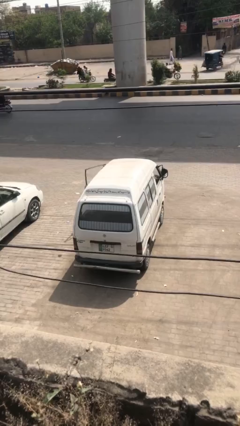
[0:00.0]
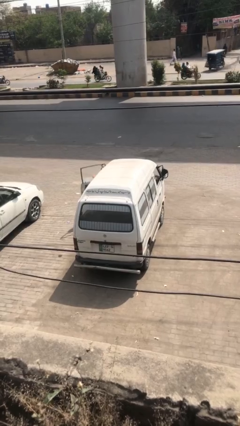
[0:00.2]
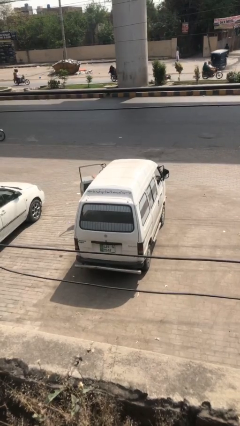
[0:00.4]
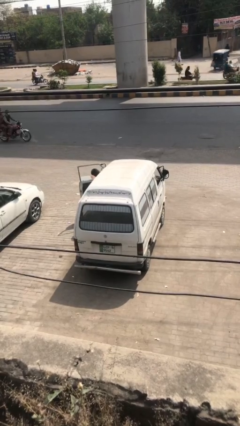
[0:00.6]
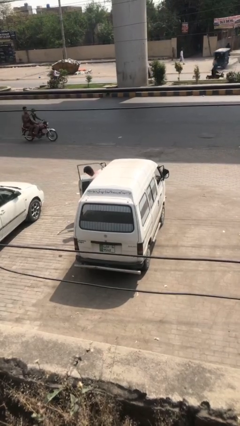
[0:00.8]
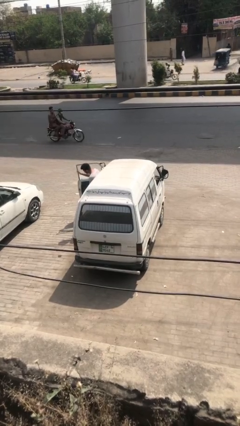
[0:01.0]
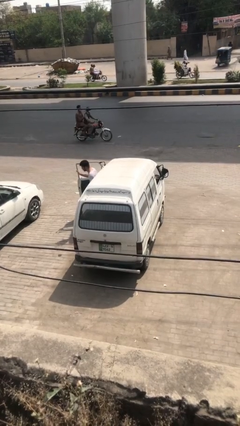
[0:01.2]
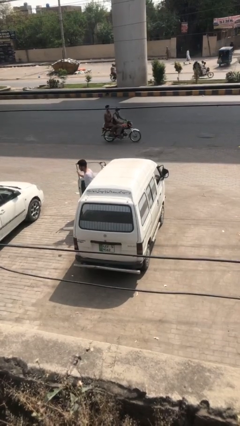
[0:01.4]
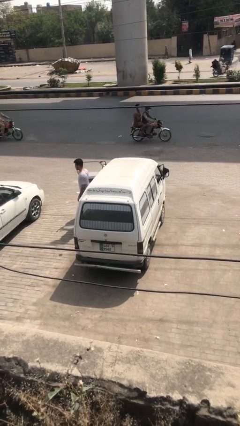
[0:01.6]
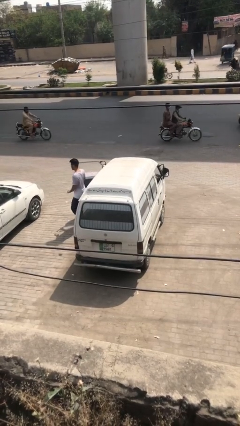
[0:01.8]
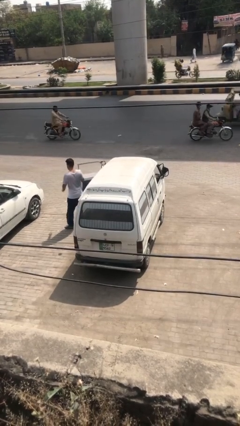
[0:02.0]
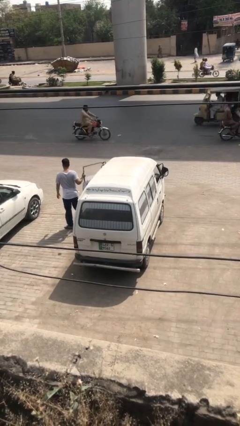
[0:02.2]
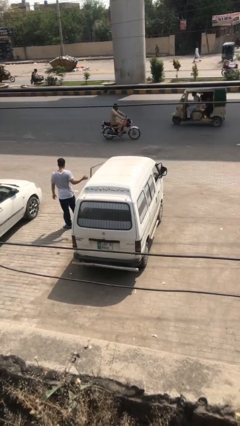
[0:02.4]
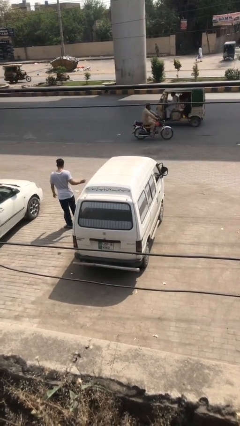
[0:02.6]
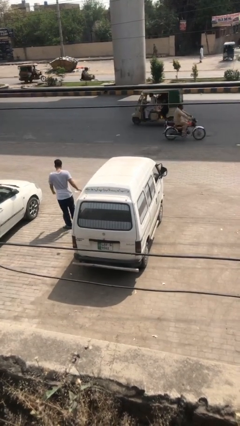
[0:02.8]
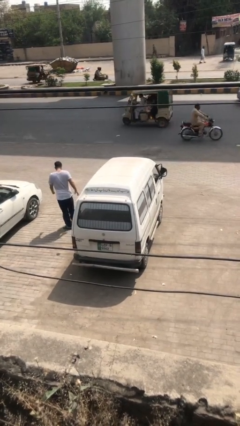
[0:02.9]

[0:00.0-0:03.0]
car drops off person

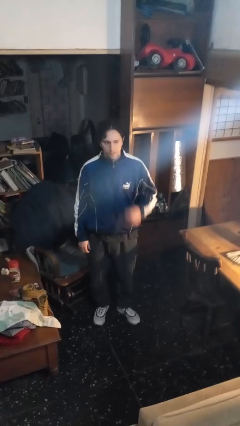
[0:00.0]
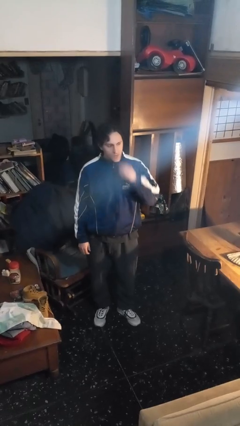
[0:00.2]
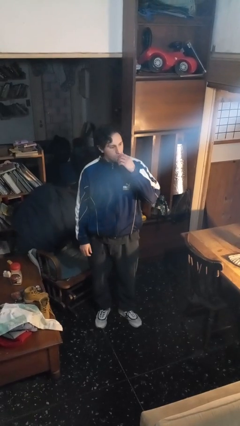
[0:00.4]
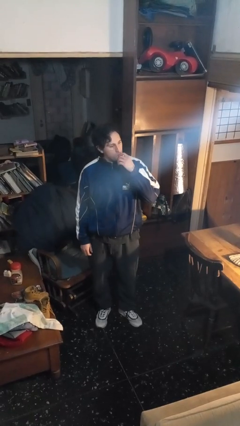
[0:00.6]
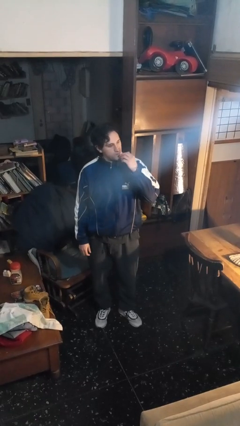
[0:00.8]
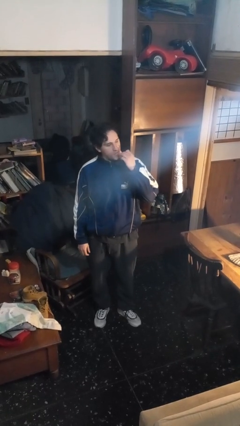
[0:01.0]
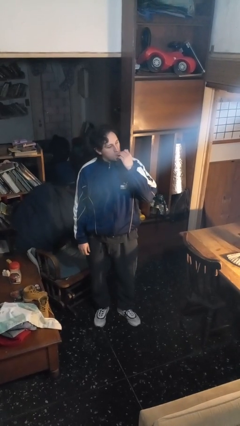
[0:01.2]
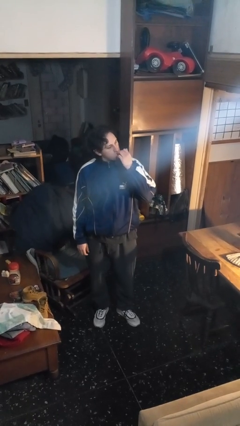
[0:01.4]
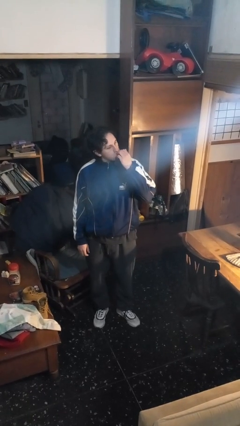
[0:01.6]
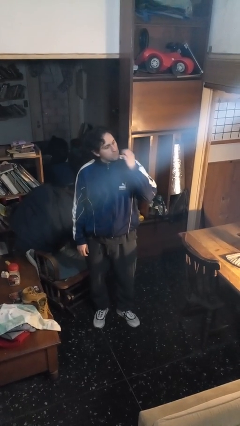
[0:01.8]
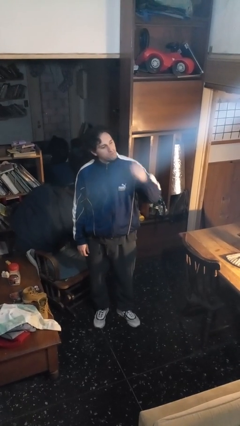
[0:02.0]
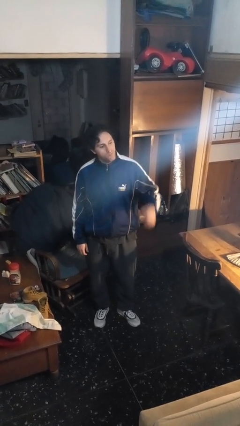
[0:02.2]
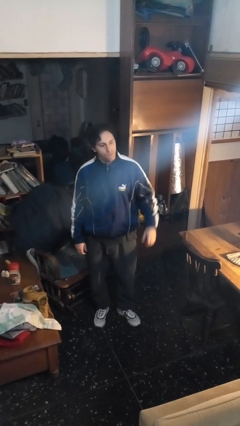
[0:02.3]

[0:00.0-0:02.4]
person licks fingers

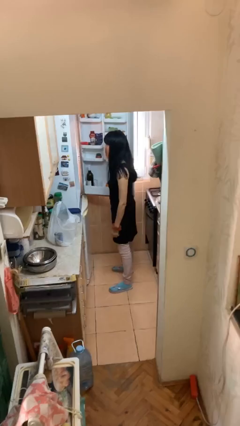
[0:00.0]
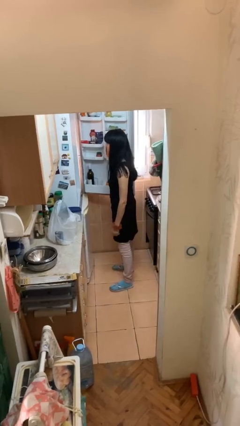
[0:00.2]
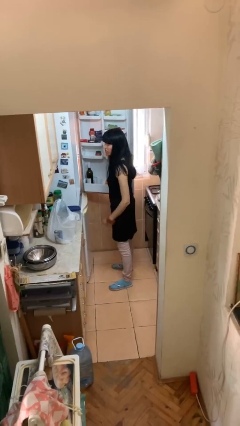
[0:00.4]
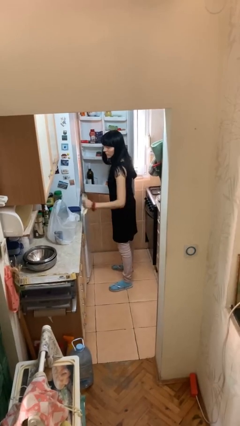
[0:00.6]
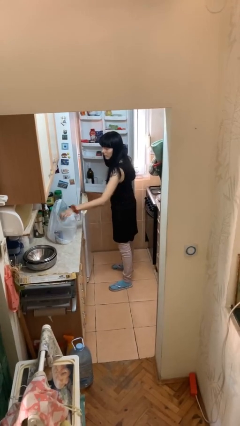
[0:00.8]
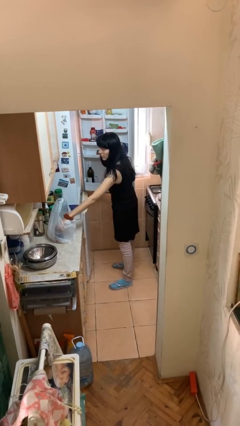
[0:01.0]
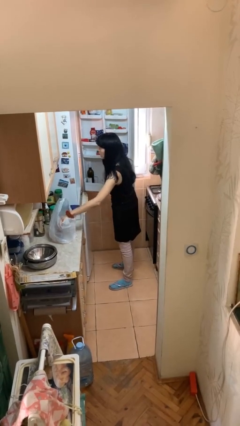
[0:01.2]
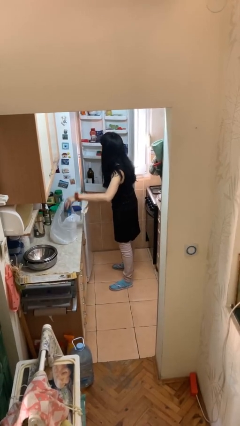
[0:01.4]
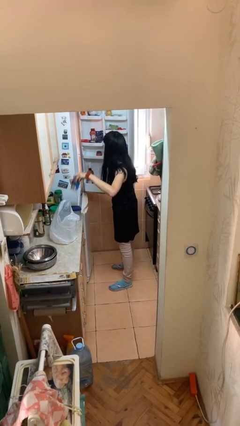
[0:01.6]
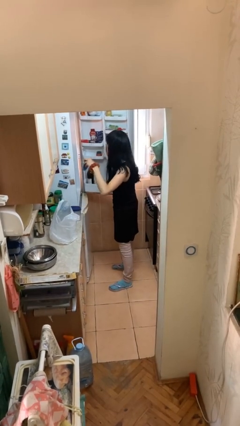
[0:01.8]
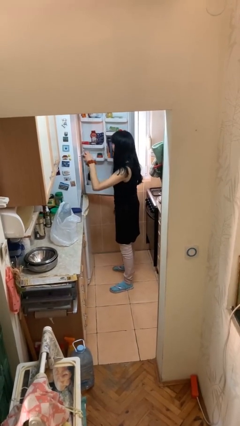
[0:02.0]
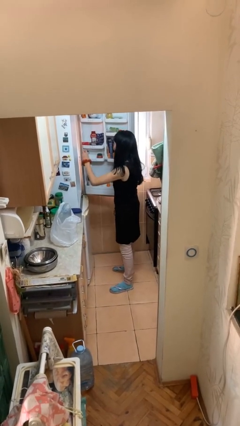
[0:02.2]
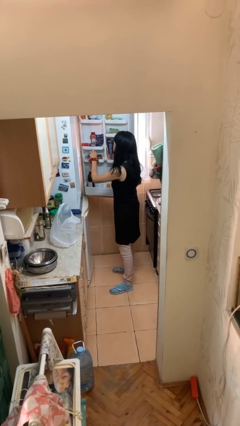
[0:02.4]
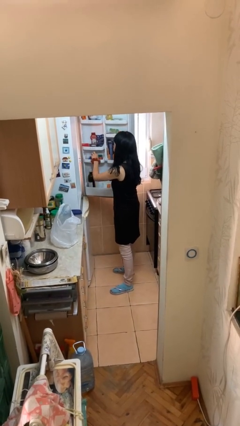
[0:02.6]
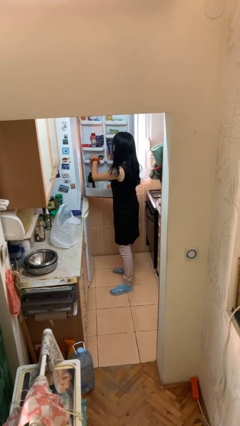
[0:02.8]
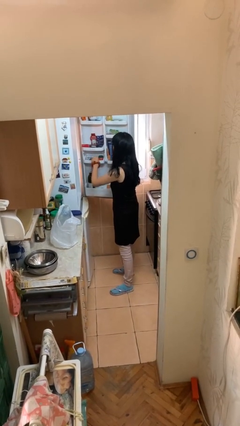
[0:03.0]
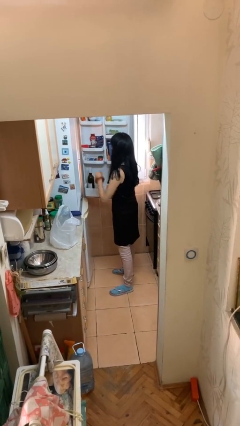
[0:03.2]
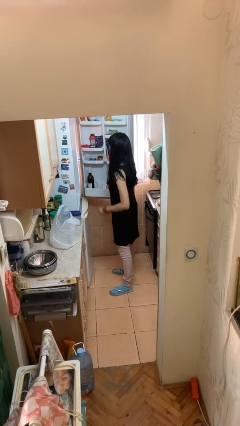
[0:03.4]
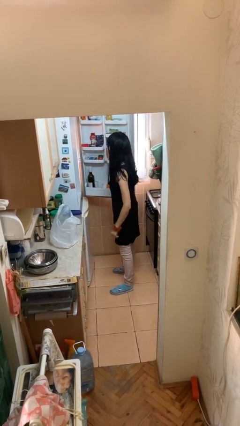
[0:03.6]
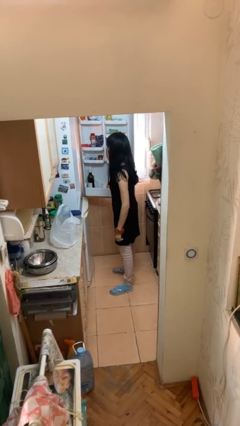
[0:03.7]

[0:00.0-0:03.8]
person loads groceries into refrigerator

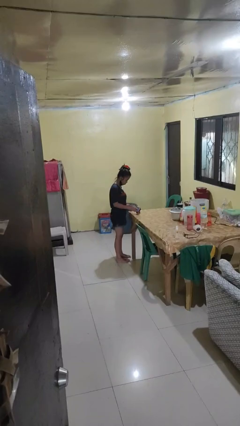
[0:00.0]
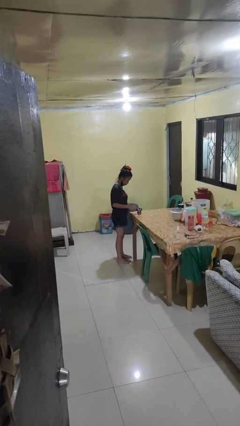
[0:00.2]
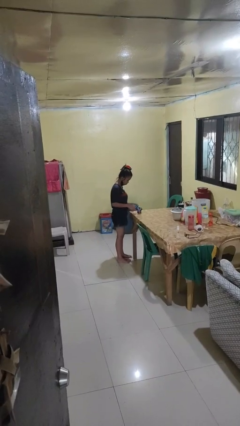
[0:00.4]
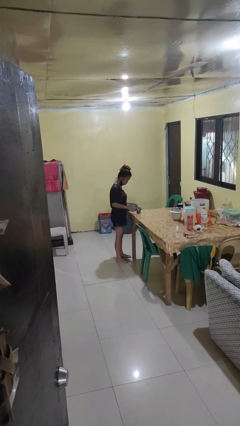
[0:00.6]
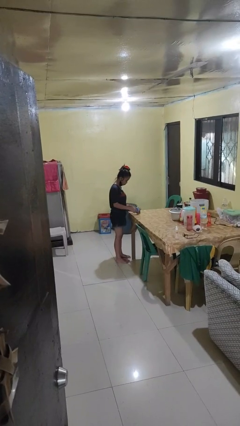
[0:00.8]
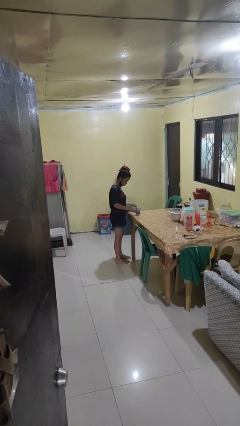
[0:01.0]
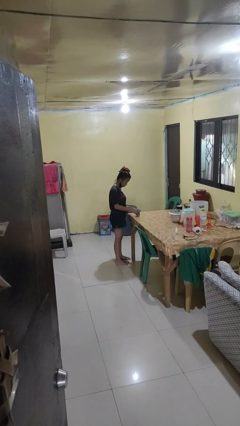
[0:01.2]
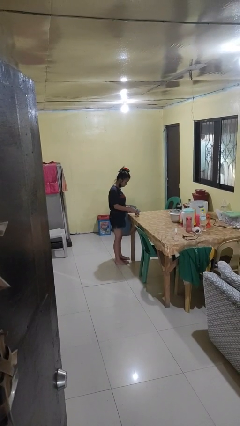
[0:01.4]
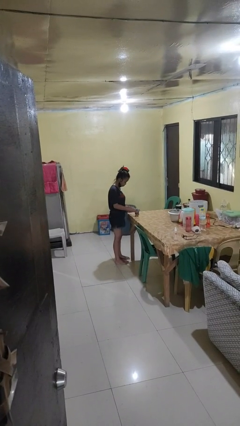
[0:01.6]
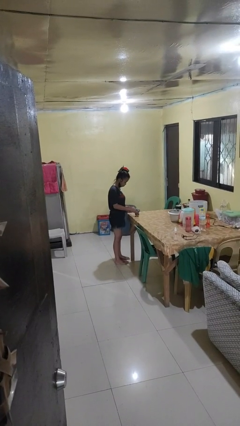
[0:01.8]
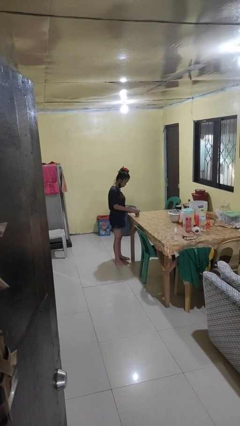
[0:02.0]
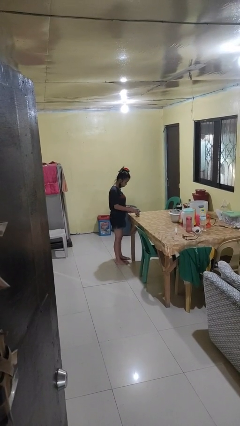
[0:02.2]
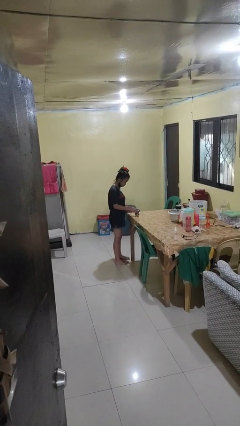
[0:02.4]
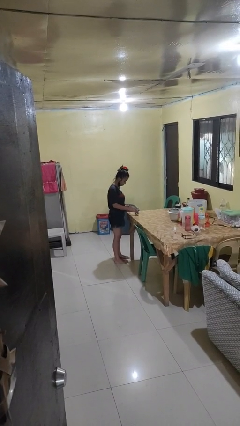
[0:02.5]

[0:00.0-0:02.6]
person opens can with can opener

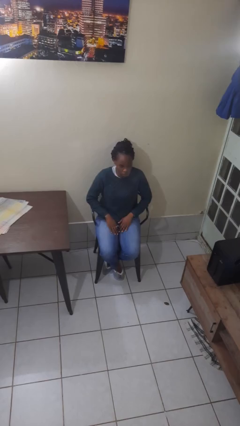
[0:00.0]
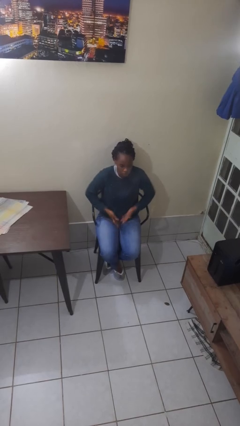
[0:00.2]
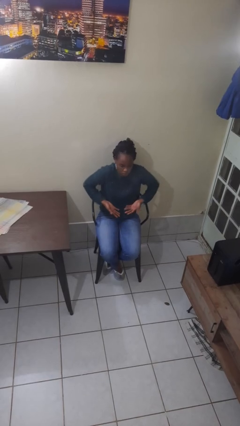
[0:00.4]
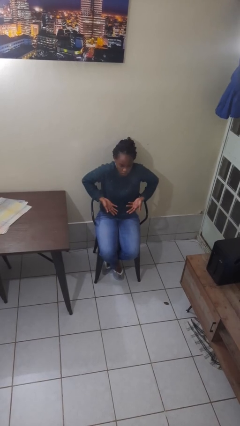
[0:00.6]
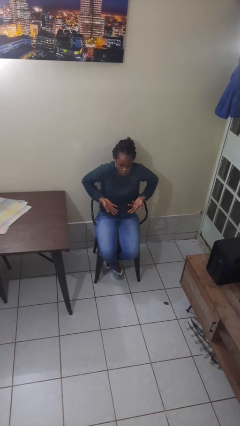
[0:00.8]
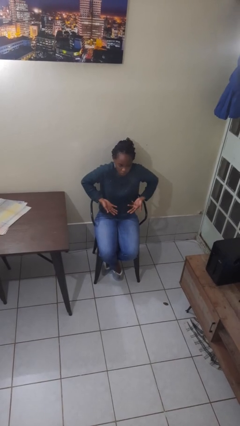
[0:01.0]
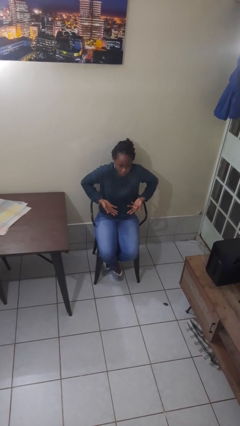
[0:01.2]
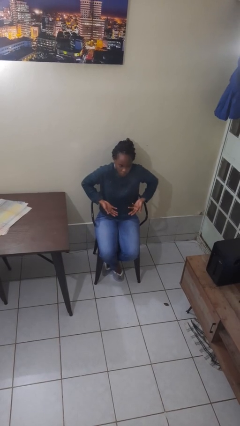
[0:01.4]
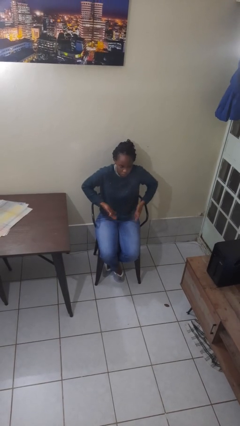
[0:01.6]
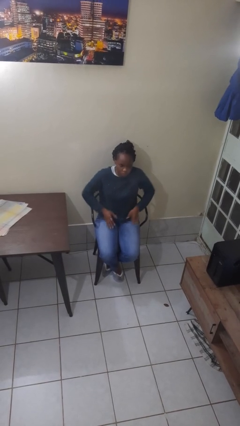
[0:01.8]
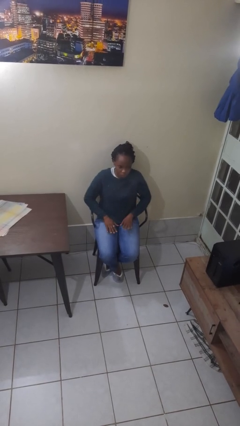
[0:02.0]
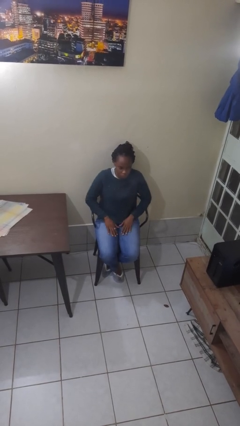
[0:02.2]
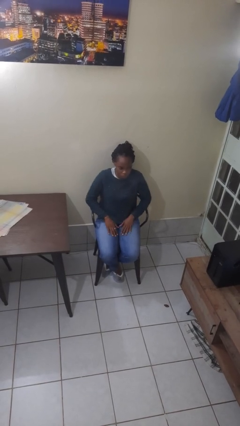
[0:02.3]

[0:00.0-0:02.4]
person shrugs

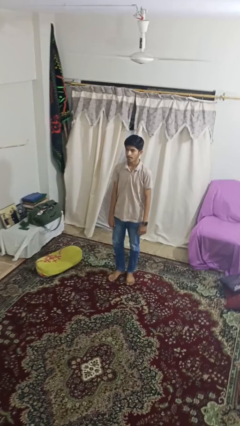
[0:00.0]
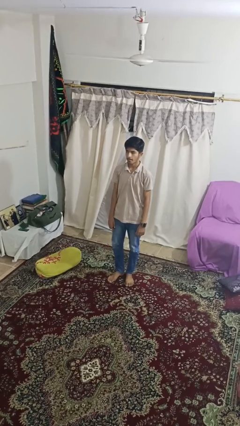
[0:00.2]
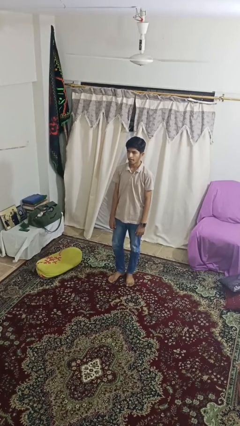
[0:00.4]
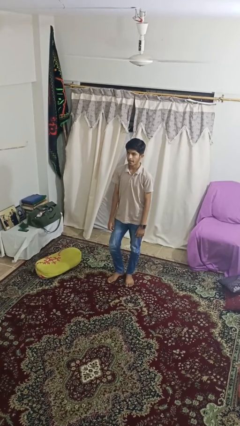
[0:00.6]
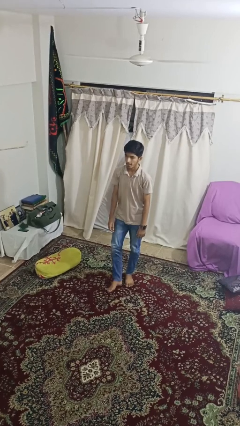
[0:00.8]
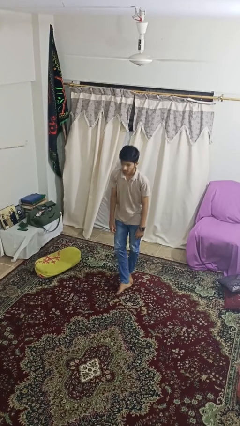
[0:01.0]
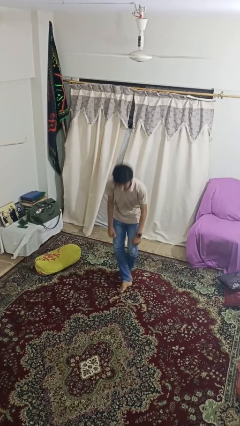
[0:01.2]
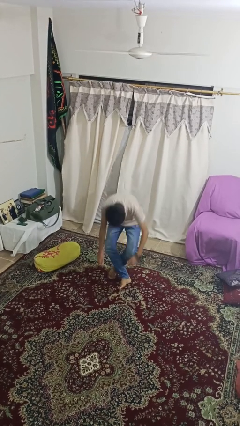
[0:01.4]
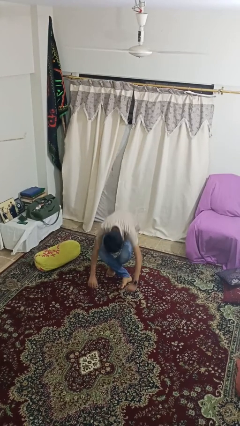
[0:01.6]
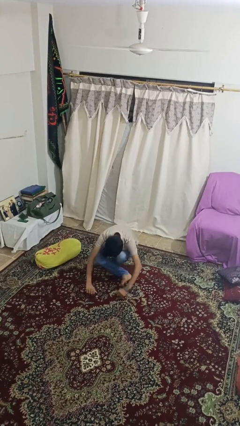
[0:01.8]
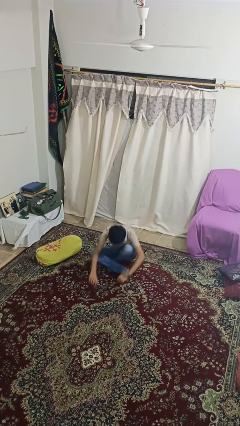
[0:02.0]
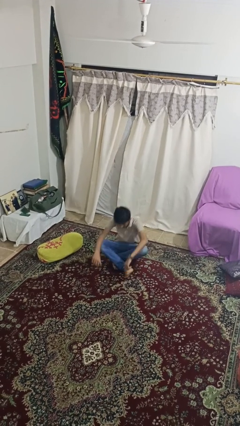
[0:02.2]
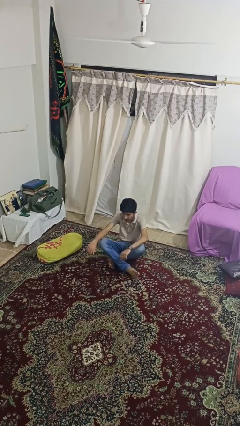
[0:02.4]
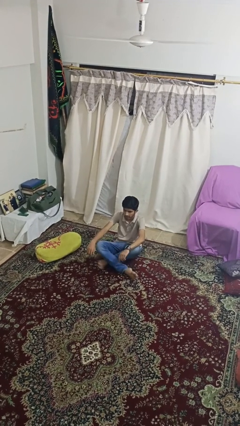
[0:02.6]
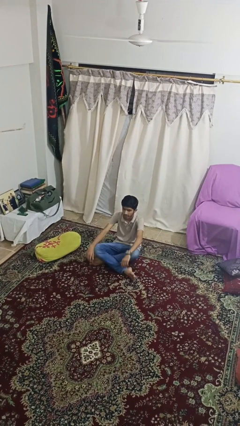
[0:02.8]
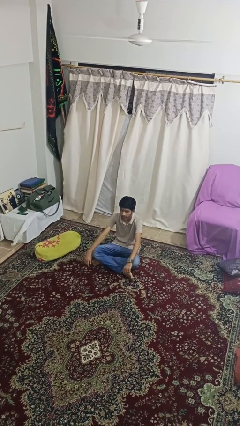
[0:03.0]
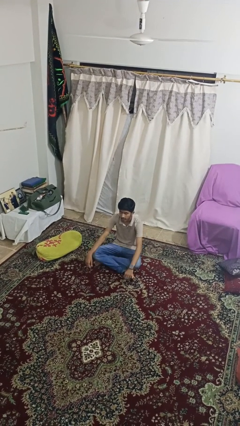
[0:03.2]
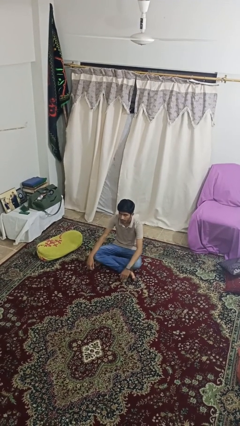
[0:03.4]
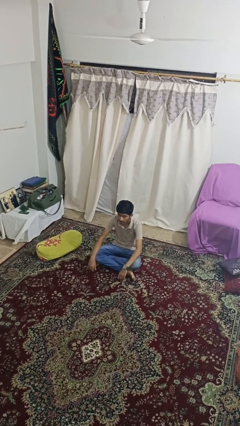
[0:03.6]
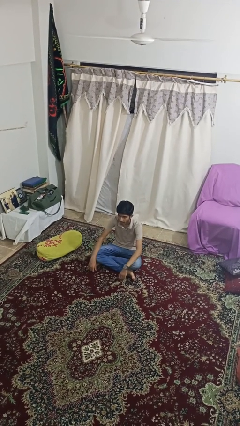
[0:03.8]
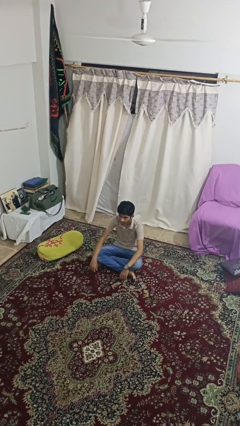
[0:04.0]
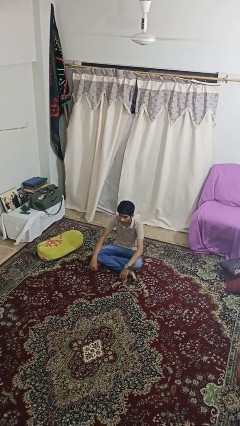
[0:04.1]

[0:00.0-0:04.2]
person sits crisscross
